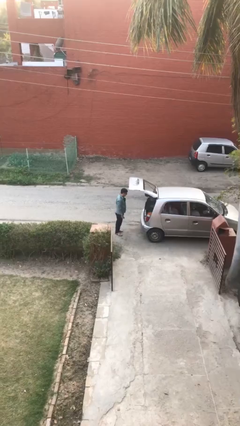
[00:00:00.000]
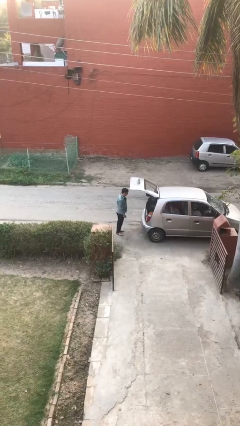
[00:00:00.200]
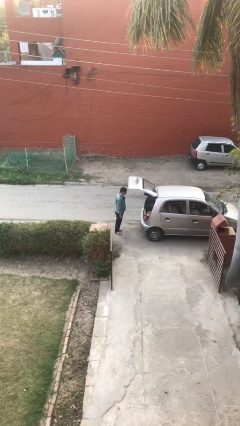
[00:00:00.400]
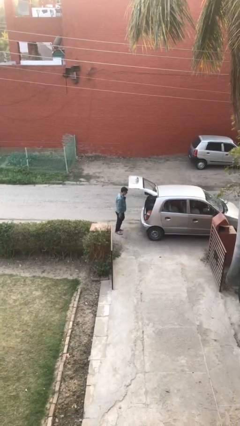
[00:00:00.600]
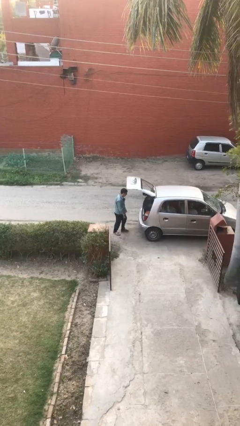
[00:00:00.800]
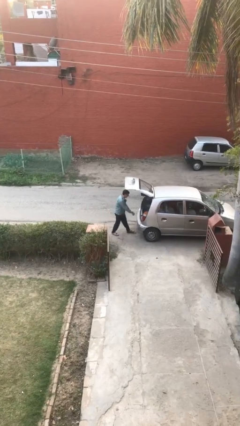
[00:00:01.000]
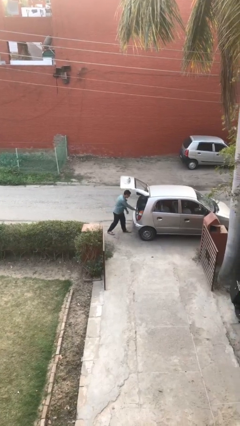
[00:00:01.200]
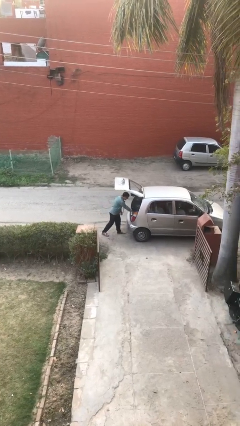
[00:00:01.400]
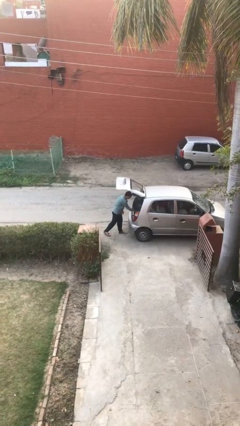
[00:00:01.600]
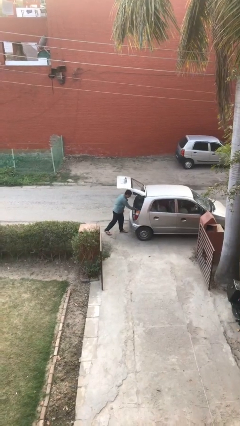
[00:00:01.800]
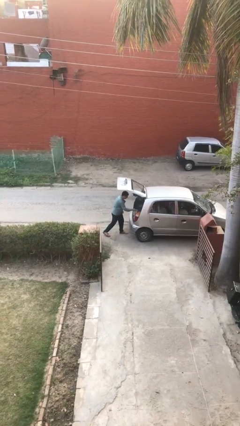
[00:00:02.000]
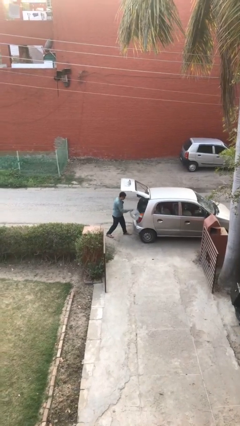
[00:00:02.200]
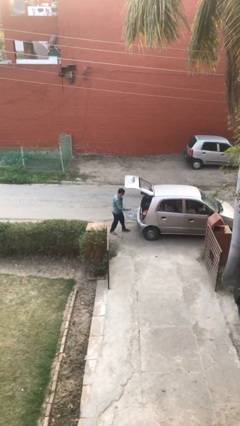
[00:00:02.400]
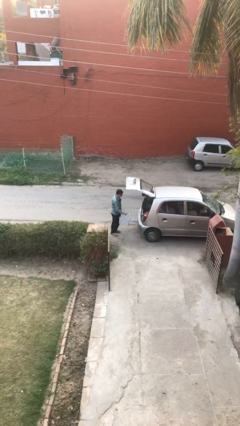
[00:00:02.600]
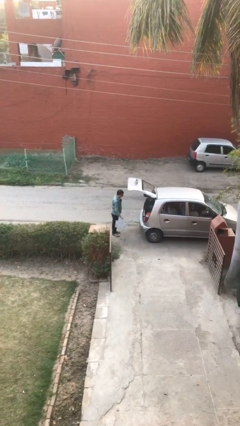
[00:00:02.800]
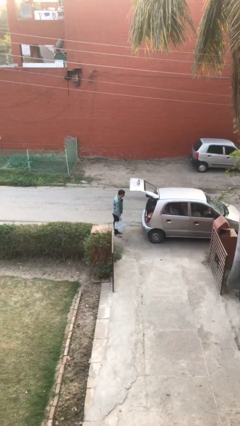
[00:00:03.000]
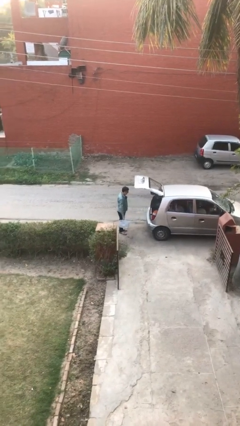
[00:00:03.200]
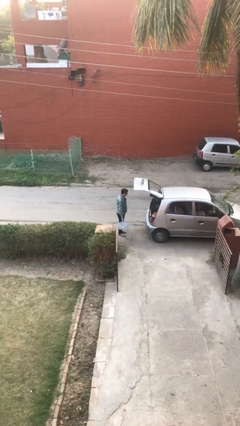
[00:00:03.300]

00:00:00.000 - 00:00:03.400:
person unloads car

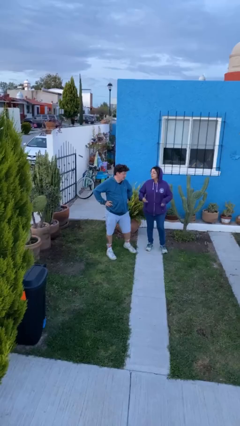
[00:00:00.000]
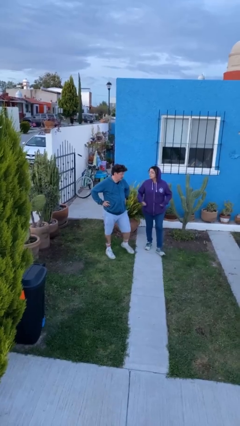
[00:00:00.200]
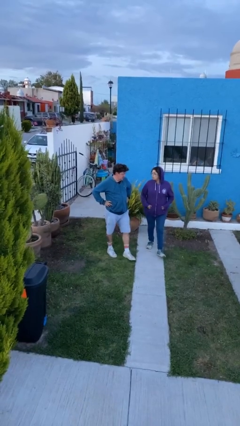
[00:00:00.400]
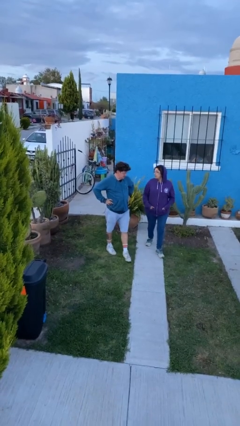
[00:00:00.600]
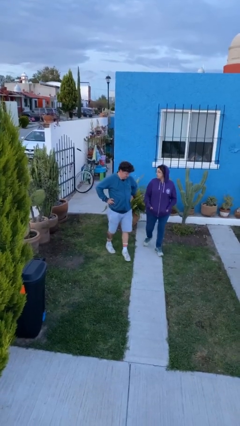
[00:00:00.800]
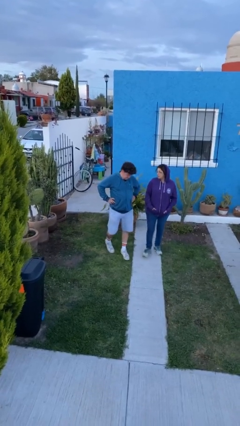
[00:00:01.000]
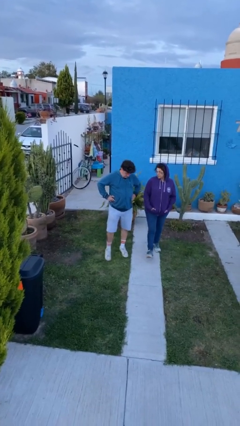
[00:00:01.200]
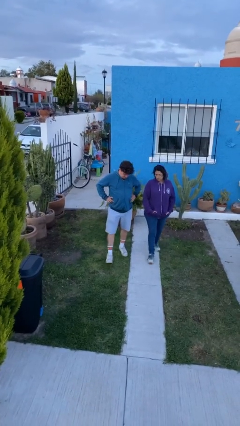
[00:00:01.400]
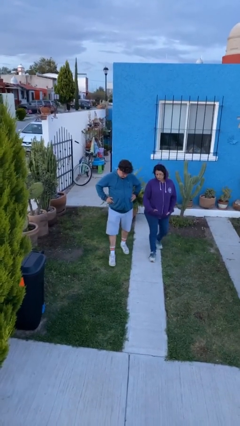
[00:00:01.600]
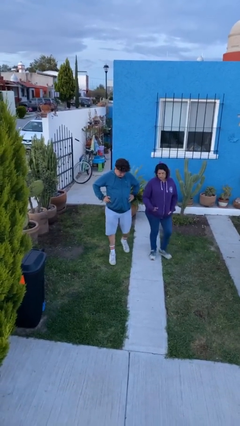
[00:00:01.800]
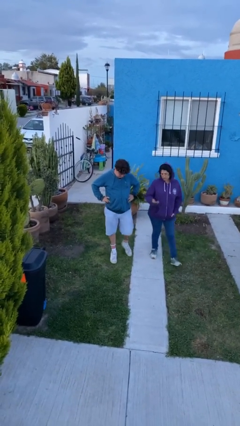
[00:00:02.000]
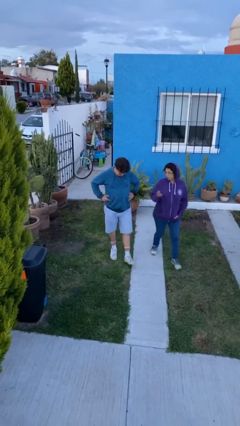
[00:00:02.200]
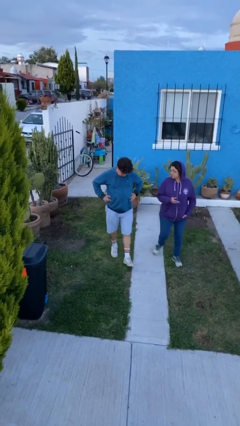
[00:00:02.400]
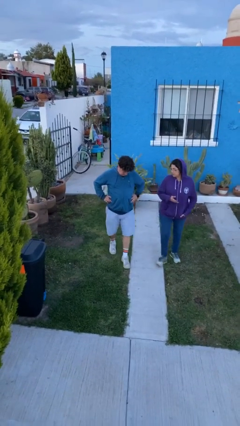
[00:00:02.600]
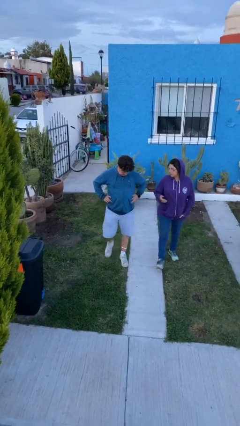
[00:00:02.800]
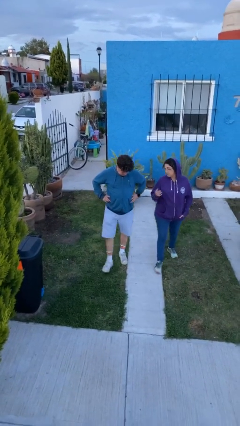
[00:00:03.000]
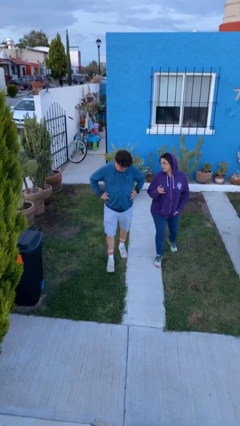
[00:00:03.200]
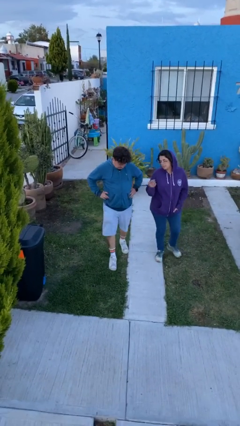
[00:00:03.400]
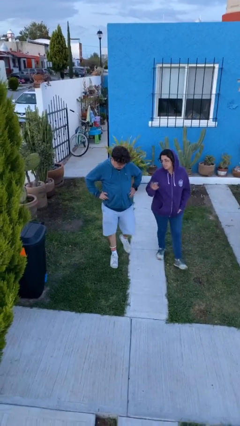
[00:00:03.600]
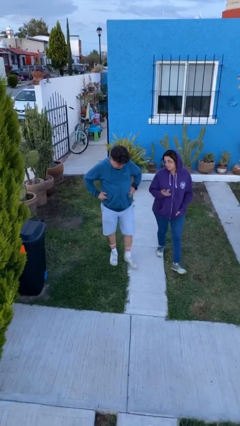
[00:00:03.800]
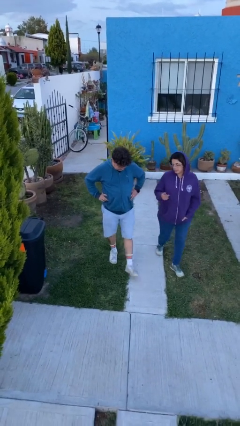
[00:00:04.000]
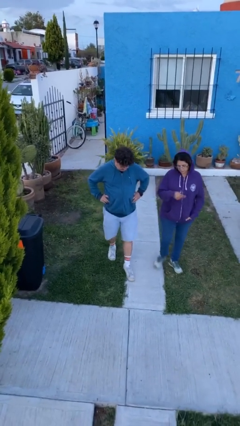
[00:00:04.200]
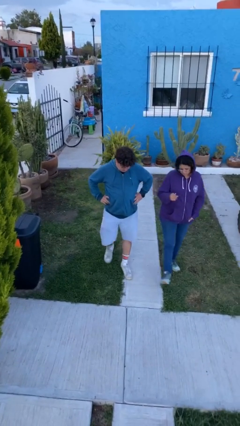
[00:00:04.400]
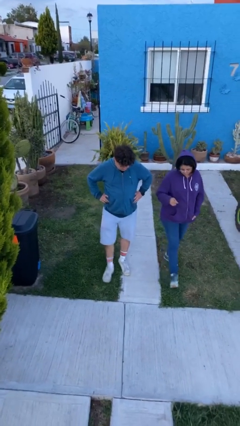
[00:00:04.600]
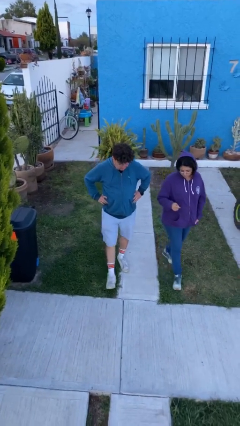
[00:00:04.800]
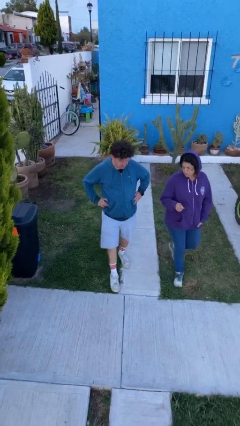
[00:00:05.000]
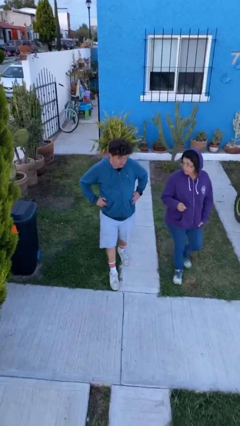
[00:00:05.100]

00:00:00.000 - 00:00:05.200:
person talks to person

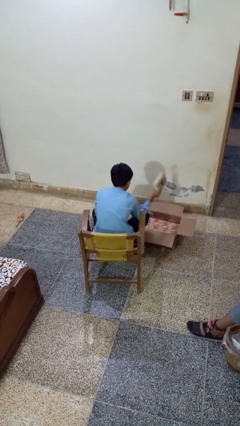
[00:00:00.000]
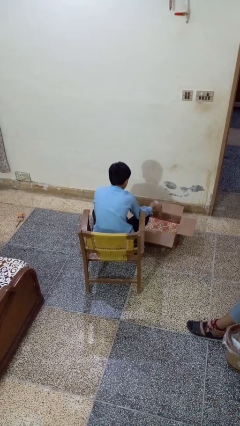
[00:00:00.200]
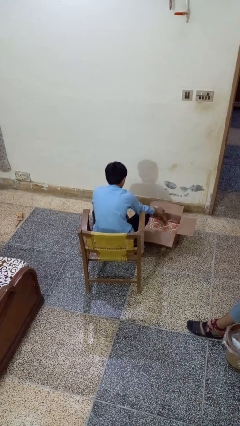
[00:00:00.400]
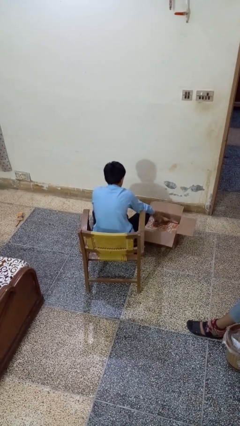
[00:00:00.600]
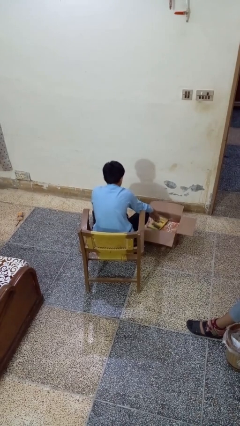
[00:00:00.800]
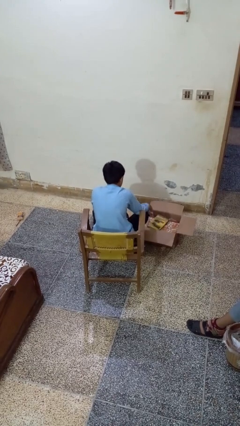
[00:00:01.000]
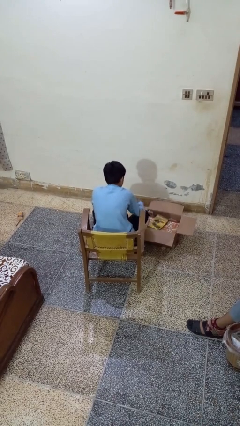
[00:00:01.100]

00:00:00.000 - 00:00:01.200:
person puts object into box

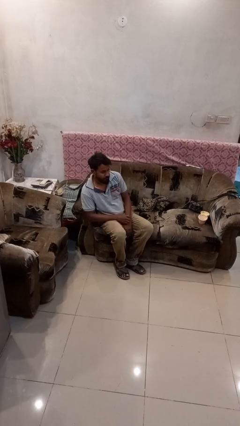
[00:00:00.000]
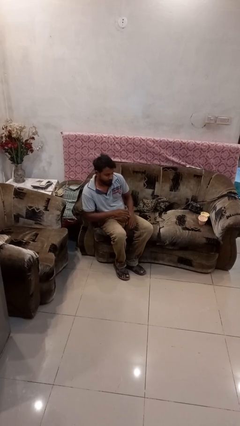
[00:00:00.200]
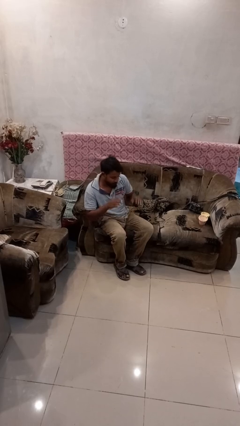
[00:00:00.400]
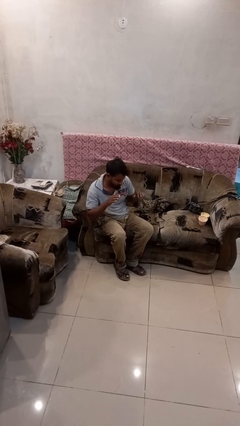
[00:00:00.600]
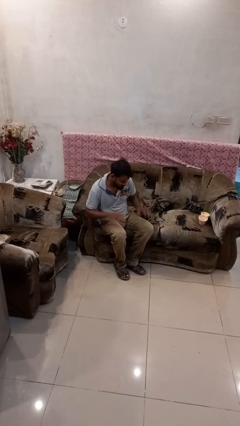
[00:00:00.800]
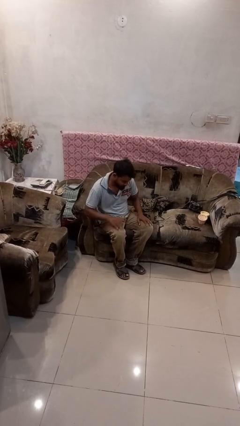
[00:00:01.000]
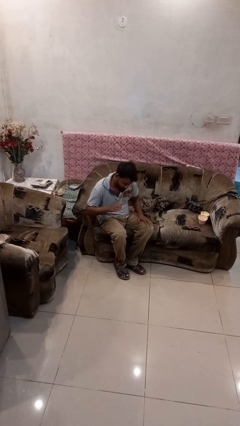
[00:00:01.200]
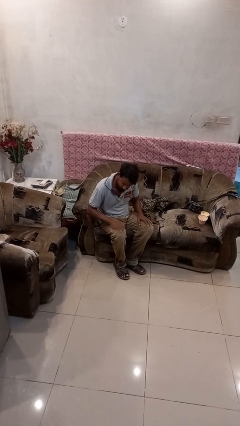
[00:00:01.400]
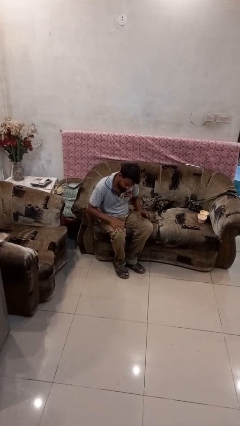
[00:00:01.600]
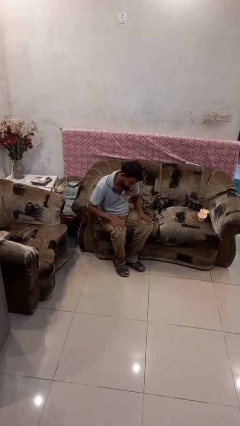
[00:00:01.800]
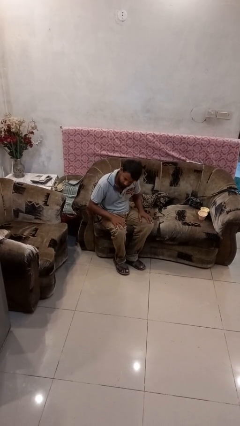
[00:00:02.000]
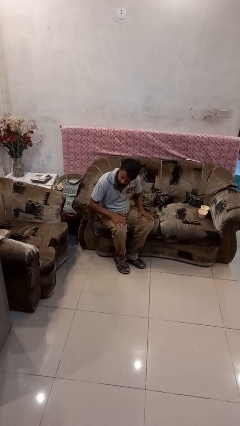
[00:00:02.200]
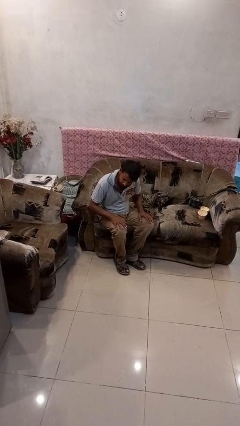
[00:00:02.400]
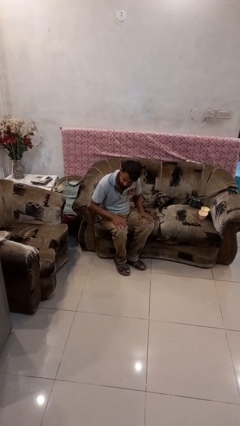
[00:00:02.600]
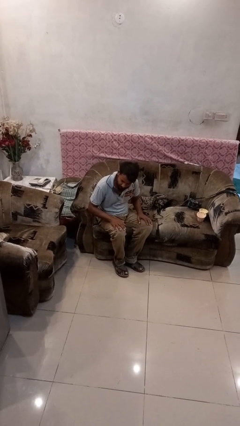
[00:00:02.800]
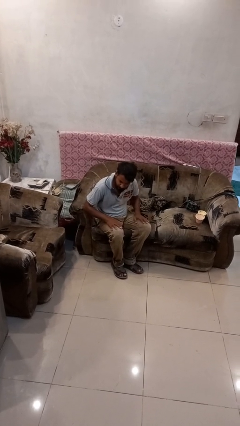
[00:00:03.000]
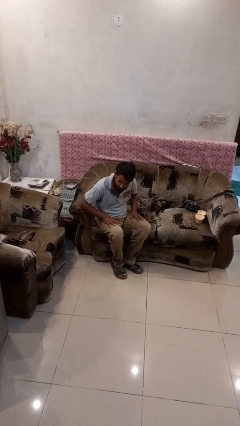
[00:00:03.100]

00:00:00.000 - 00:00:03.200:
person slaps hands on thighs

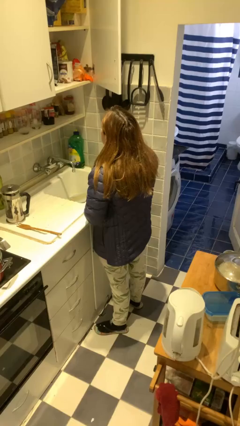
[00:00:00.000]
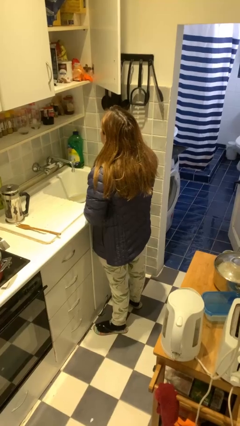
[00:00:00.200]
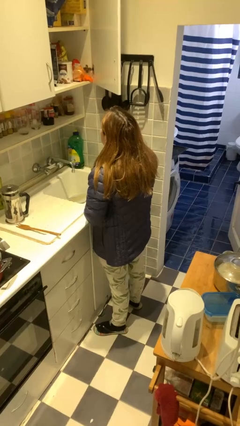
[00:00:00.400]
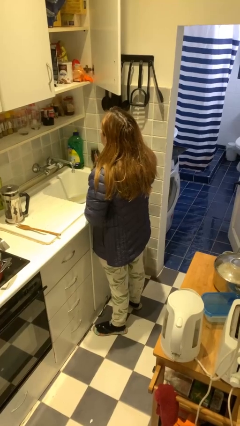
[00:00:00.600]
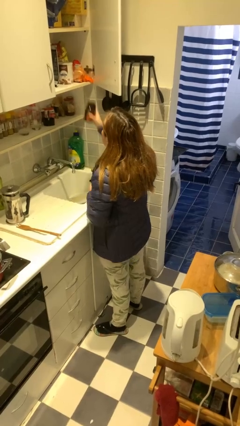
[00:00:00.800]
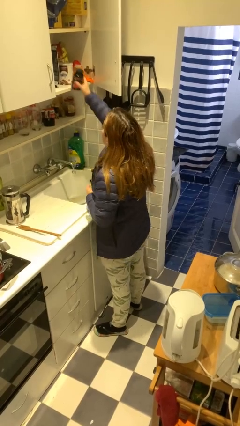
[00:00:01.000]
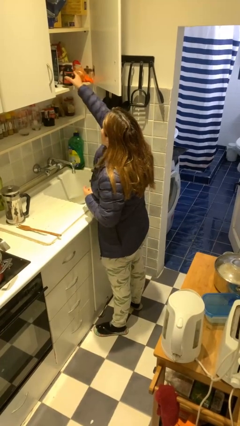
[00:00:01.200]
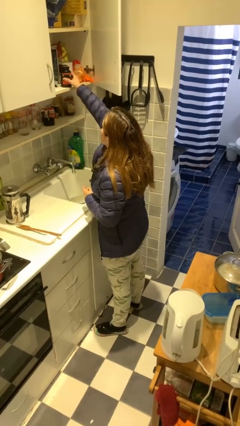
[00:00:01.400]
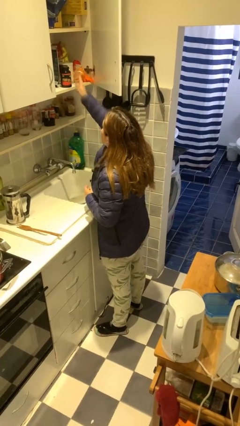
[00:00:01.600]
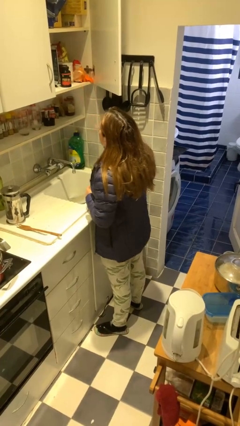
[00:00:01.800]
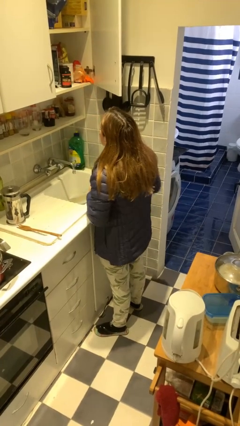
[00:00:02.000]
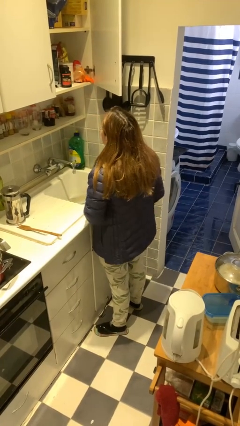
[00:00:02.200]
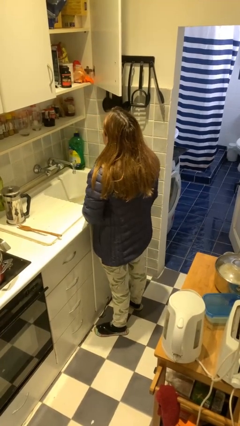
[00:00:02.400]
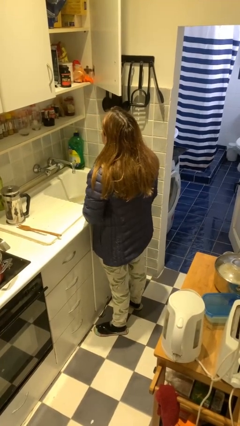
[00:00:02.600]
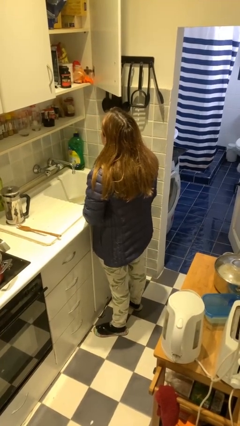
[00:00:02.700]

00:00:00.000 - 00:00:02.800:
person puts object in cabinet

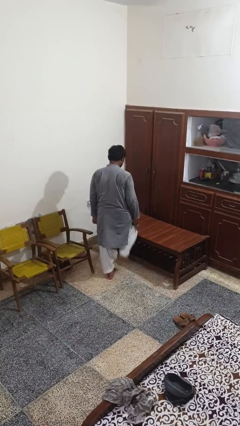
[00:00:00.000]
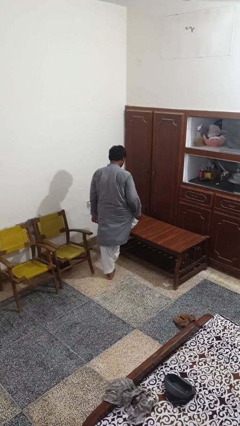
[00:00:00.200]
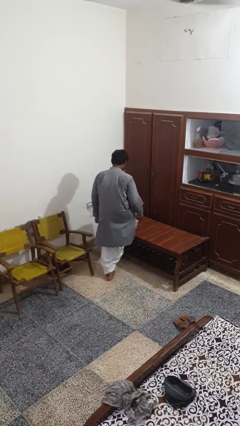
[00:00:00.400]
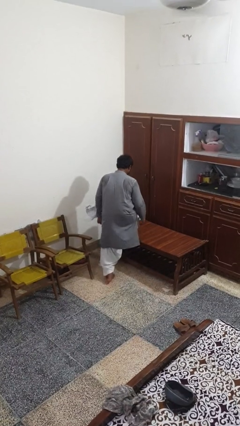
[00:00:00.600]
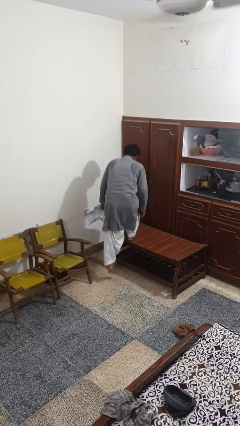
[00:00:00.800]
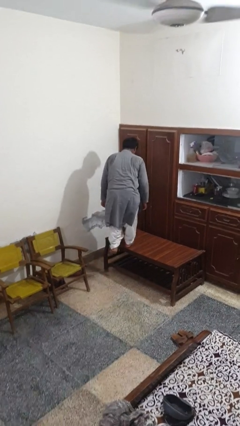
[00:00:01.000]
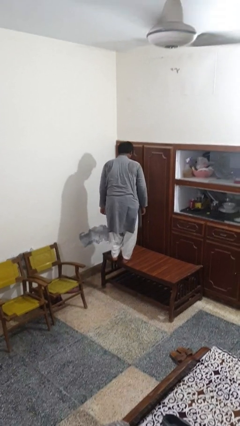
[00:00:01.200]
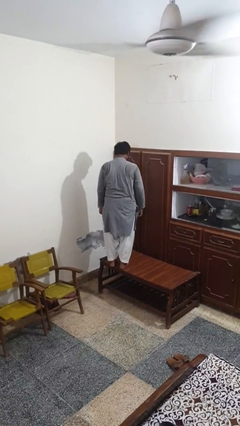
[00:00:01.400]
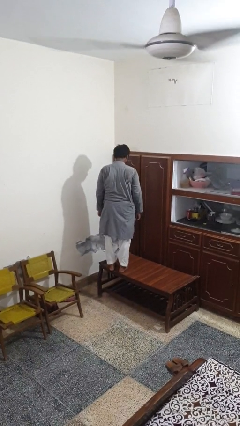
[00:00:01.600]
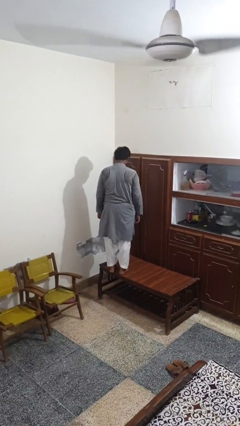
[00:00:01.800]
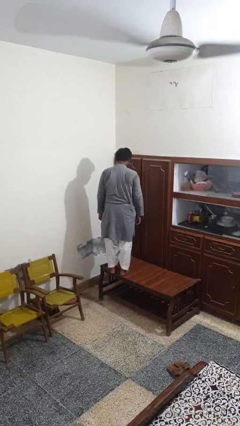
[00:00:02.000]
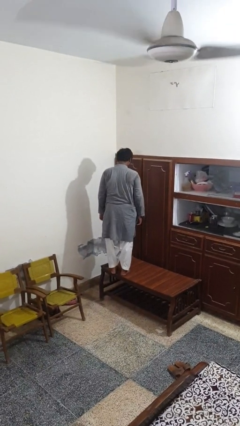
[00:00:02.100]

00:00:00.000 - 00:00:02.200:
person climbs on table
